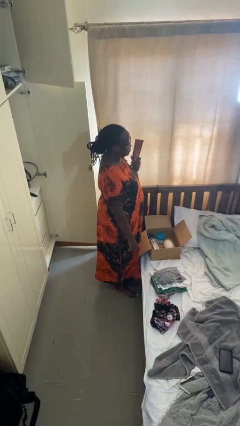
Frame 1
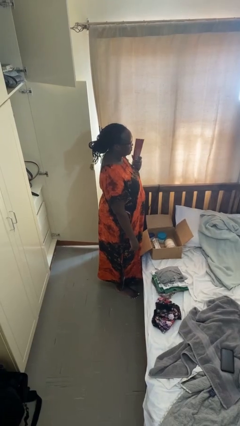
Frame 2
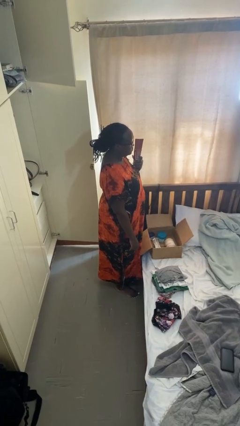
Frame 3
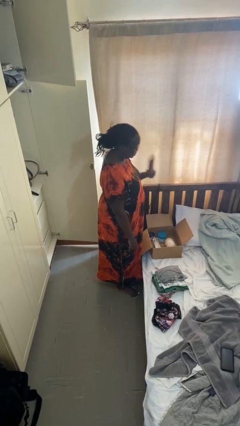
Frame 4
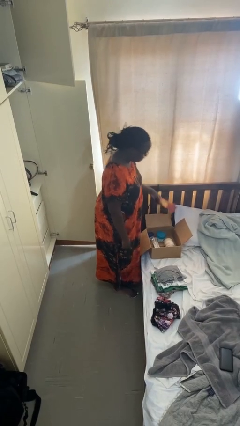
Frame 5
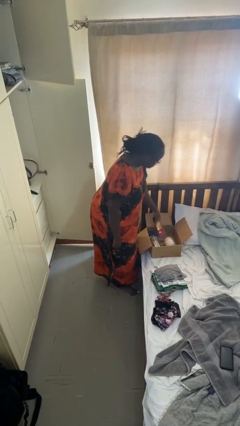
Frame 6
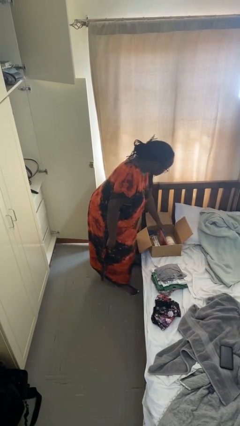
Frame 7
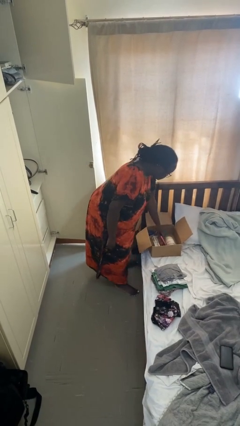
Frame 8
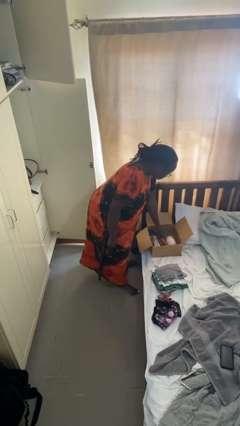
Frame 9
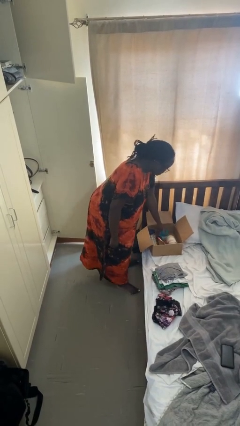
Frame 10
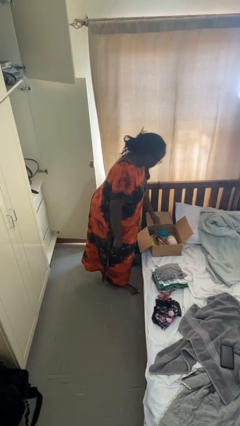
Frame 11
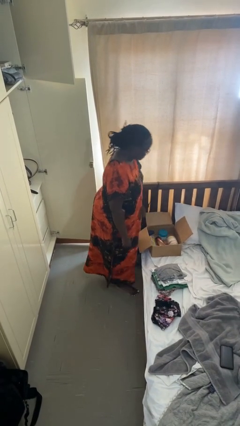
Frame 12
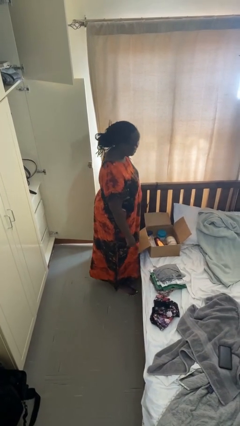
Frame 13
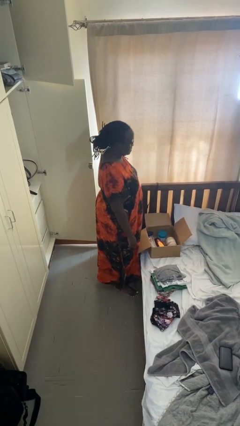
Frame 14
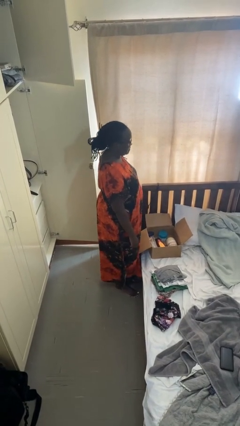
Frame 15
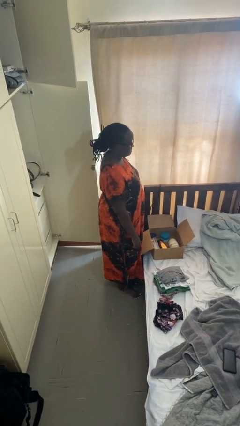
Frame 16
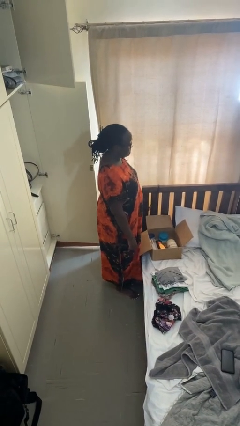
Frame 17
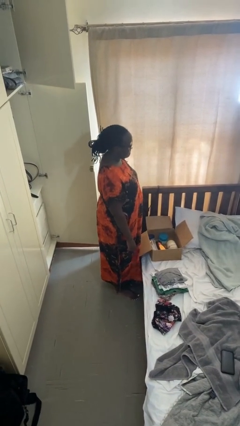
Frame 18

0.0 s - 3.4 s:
person puts object into box

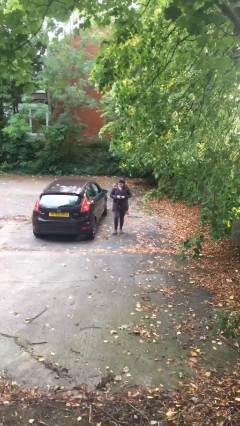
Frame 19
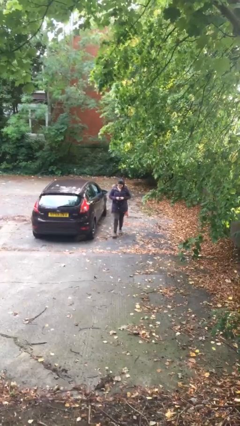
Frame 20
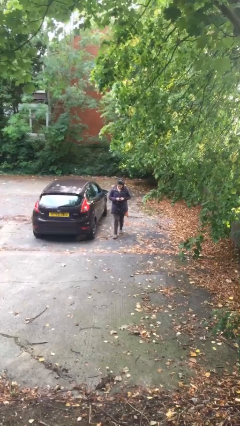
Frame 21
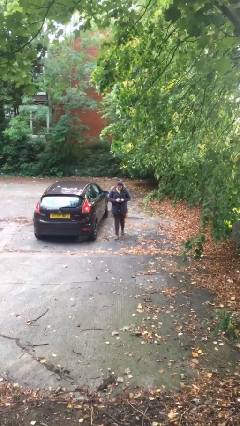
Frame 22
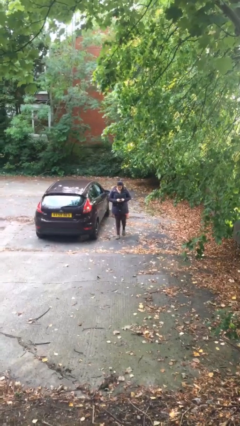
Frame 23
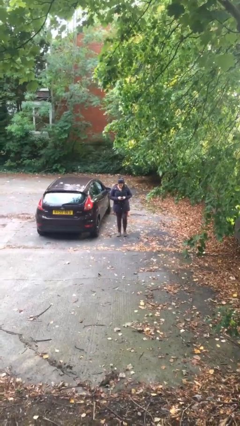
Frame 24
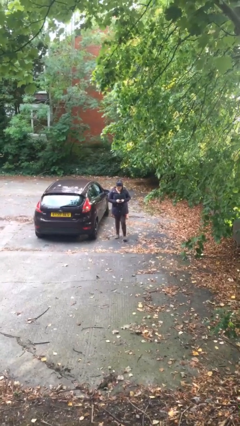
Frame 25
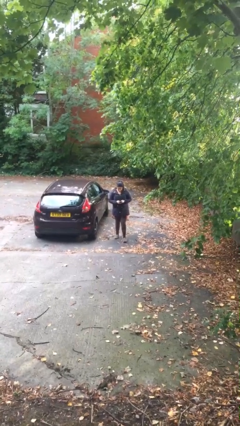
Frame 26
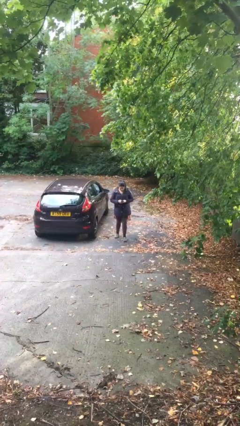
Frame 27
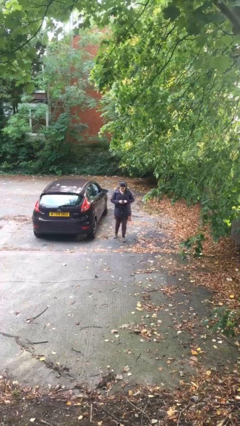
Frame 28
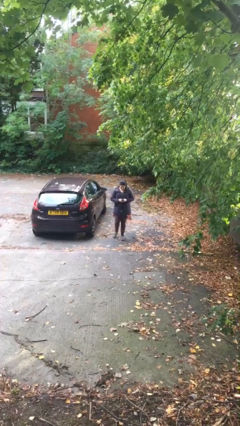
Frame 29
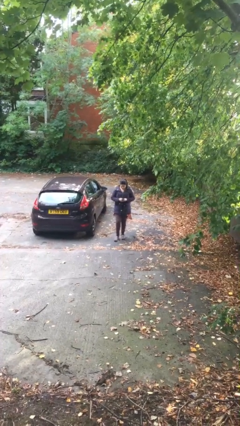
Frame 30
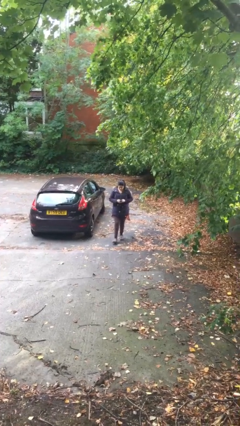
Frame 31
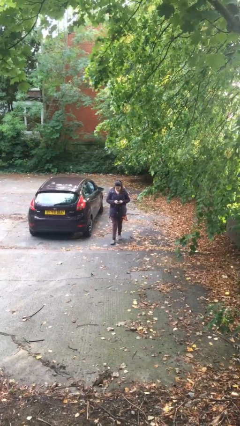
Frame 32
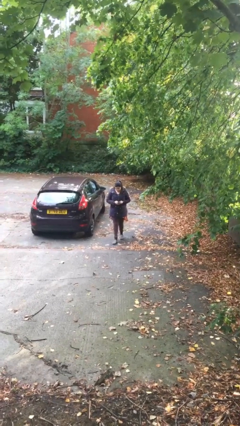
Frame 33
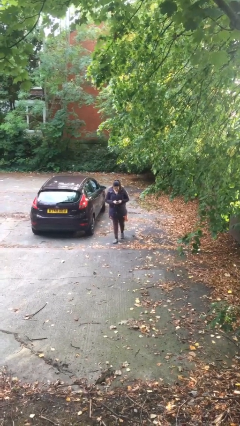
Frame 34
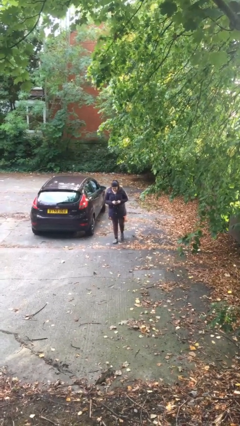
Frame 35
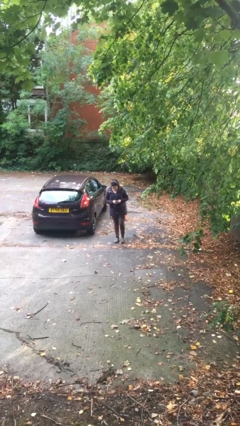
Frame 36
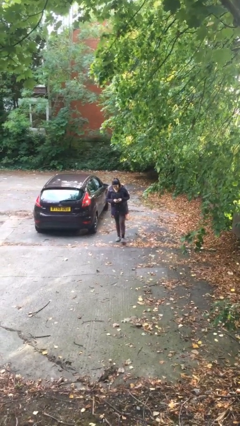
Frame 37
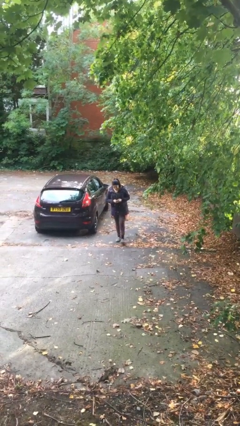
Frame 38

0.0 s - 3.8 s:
person texts on phone

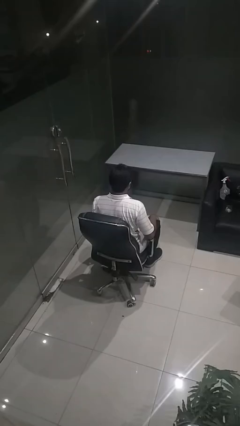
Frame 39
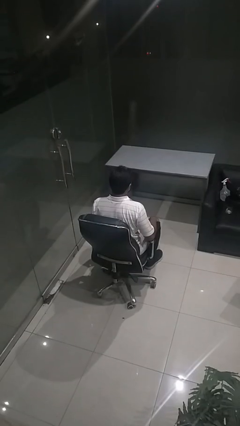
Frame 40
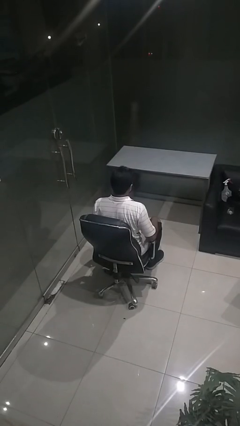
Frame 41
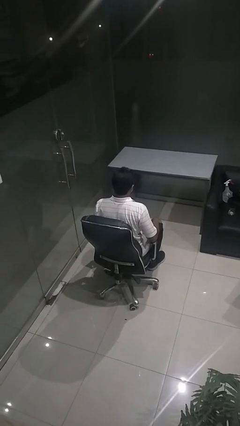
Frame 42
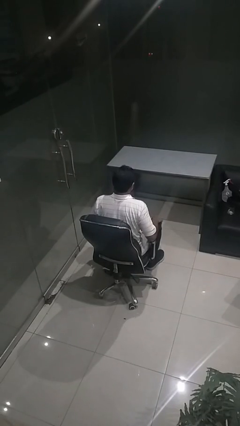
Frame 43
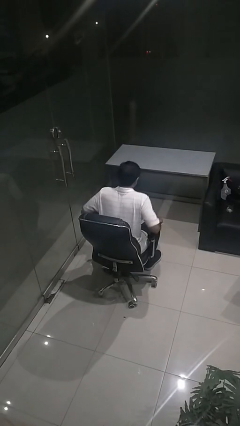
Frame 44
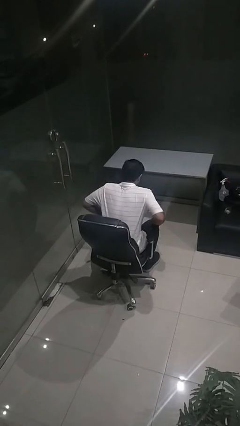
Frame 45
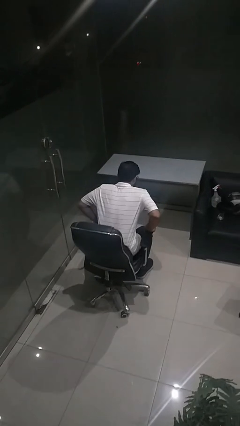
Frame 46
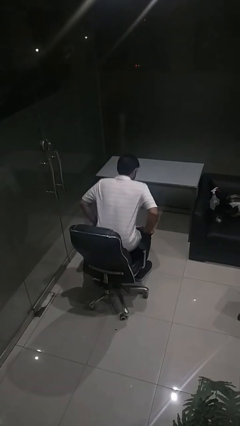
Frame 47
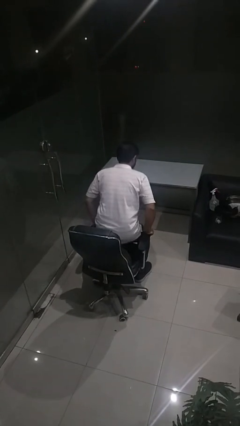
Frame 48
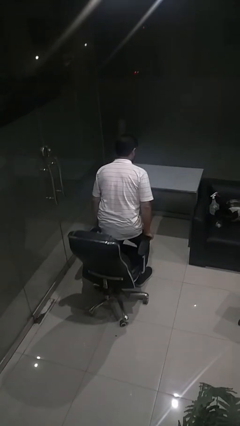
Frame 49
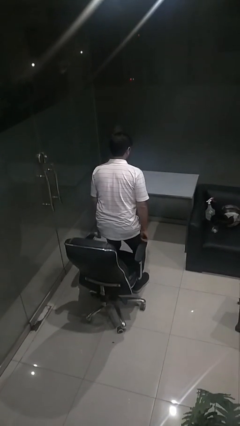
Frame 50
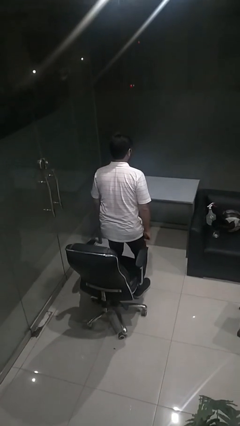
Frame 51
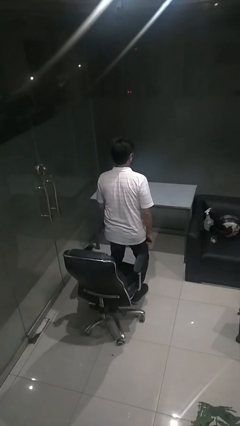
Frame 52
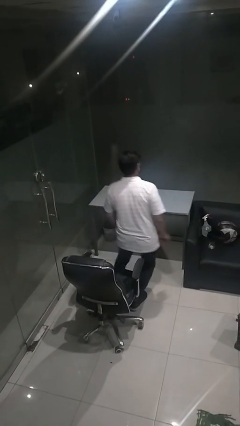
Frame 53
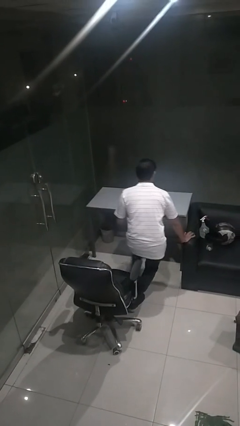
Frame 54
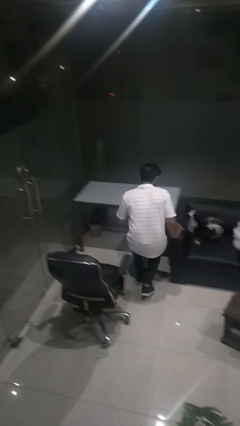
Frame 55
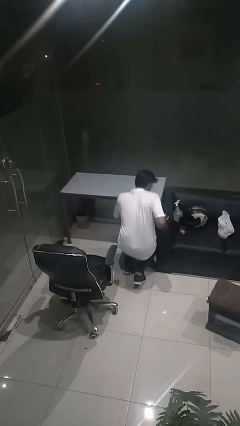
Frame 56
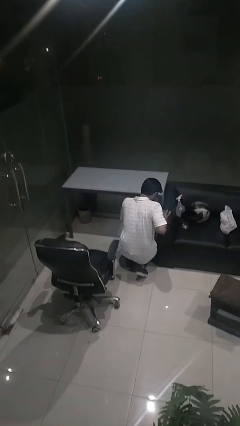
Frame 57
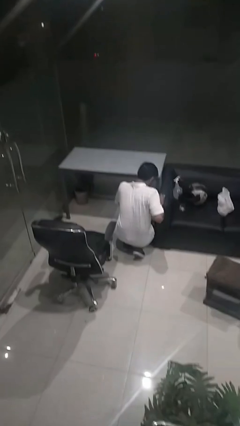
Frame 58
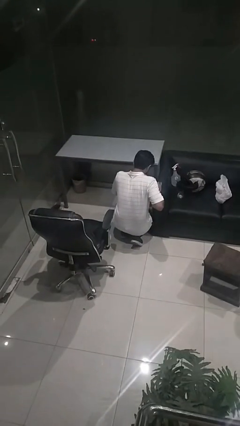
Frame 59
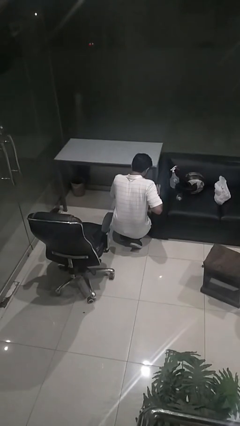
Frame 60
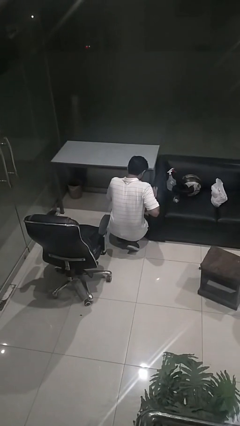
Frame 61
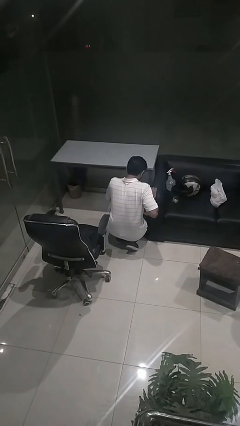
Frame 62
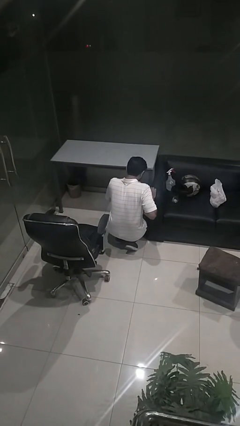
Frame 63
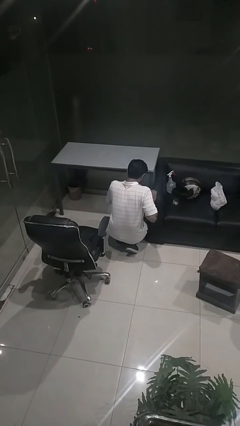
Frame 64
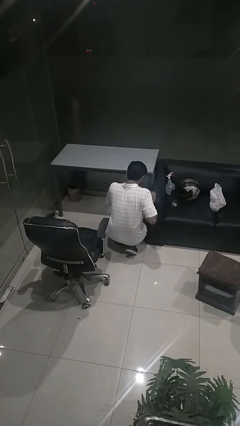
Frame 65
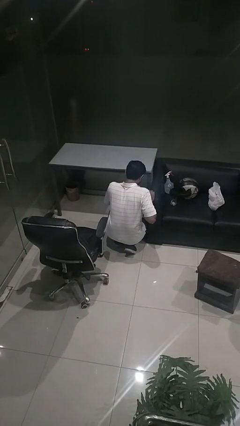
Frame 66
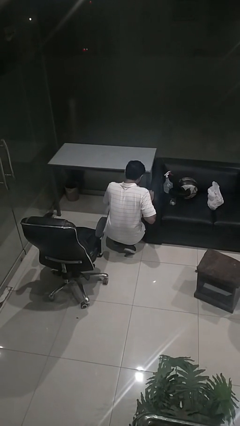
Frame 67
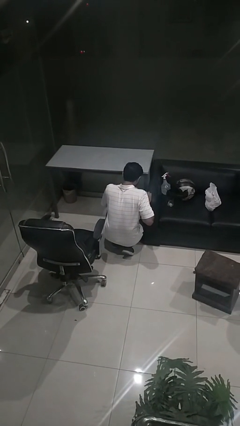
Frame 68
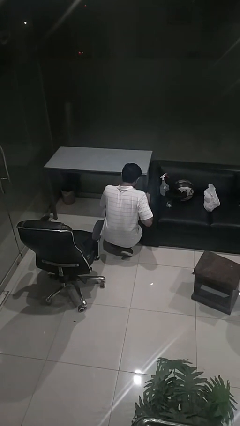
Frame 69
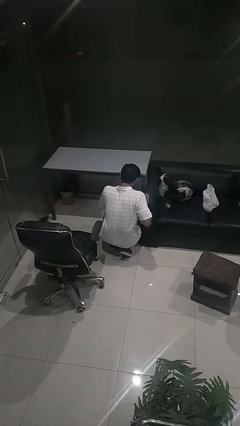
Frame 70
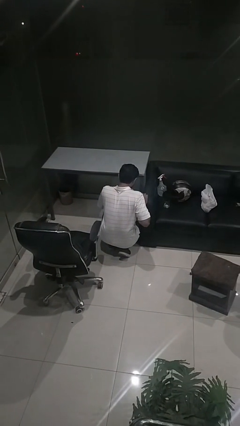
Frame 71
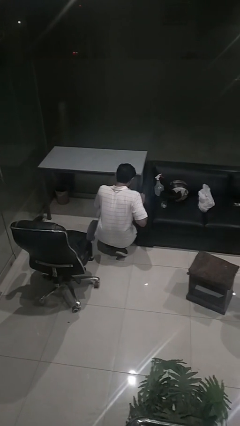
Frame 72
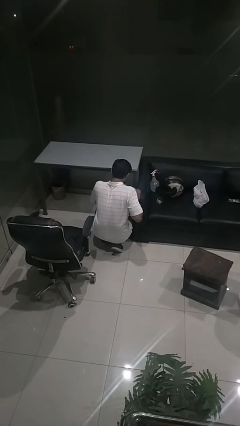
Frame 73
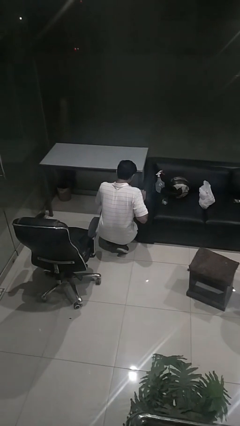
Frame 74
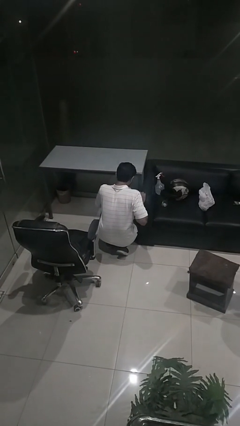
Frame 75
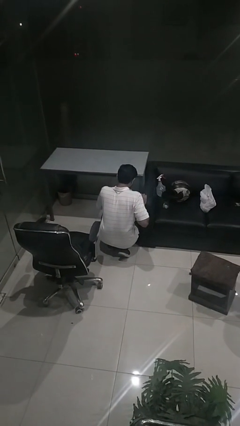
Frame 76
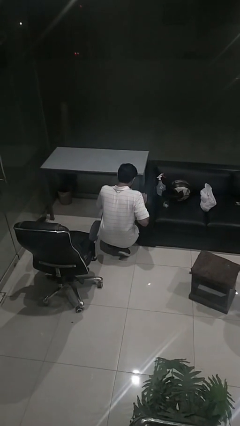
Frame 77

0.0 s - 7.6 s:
person falls from chair

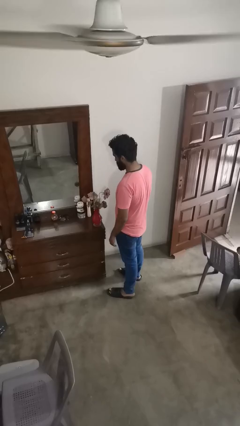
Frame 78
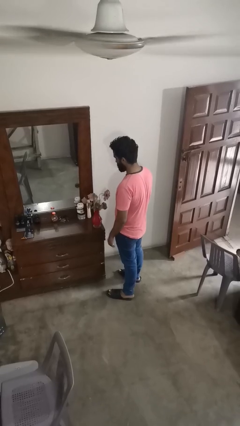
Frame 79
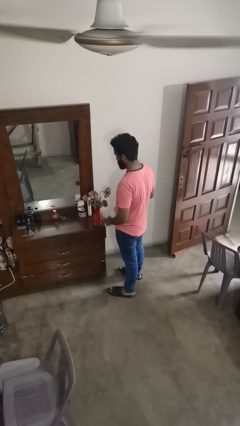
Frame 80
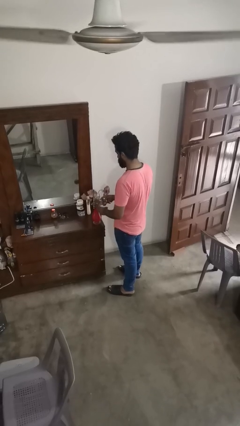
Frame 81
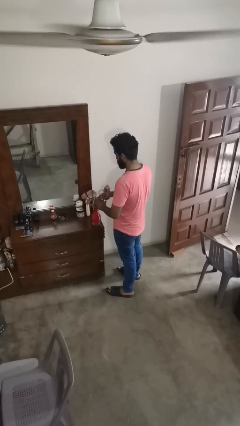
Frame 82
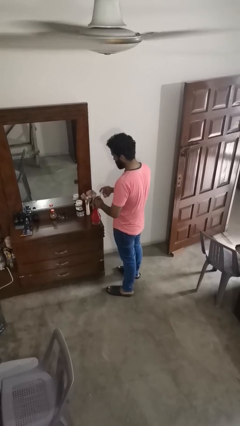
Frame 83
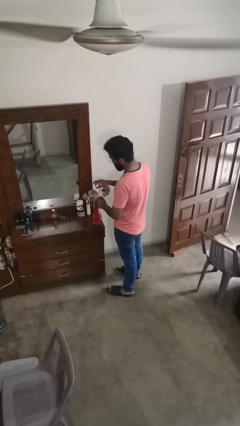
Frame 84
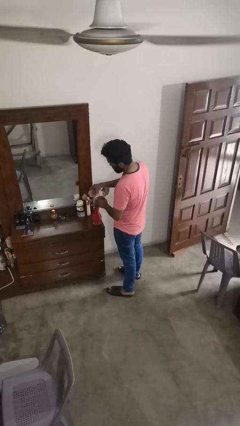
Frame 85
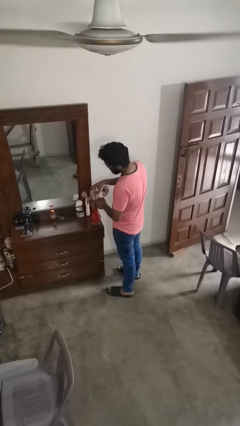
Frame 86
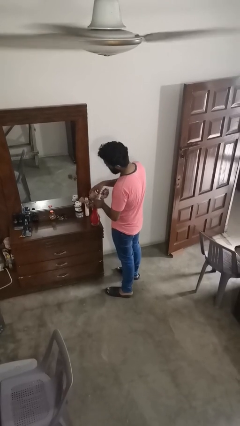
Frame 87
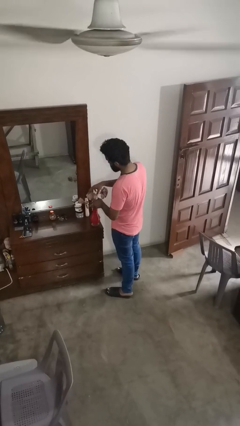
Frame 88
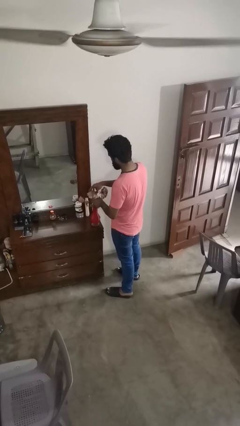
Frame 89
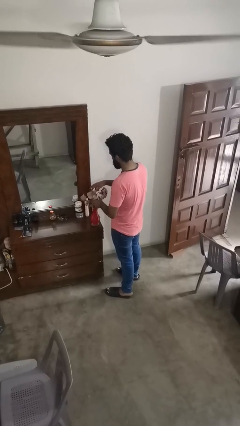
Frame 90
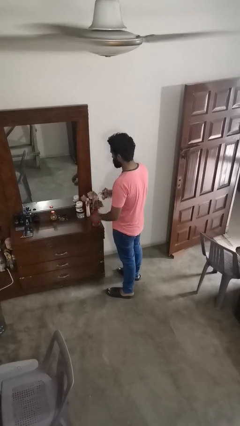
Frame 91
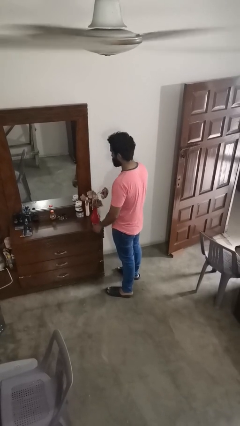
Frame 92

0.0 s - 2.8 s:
person arranges flowers in vase

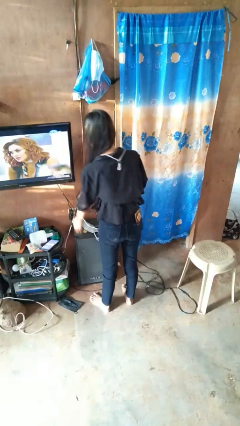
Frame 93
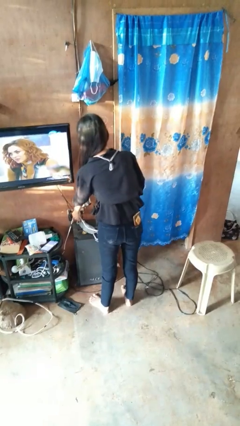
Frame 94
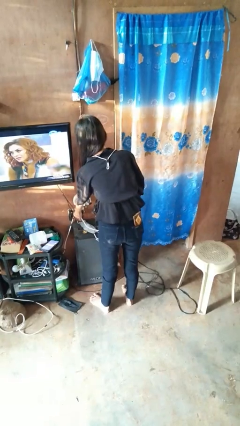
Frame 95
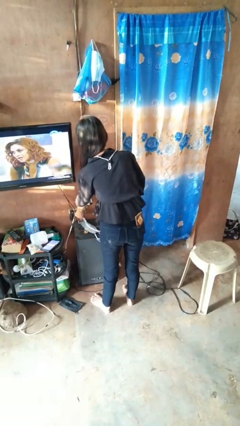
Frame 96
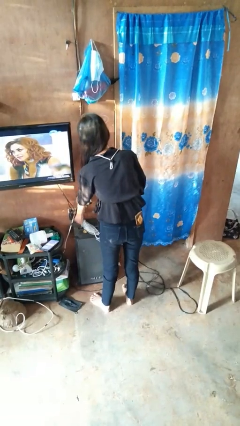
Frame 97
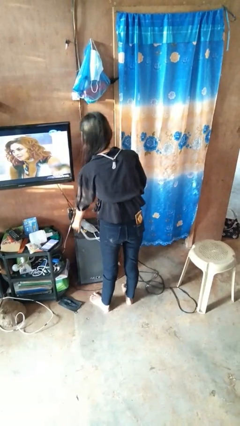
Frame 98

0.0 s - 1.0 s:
person unplugs from electrical socket
